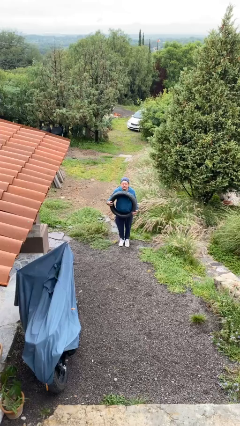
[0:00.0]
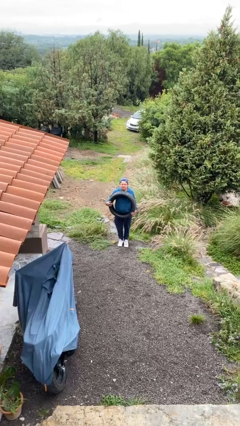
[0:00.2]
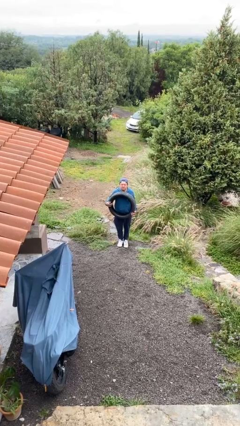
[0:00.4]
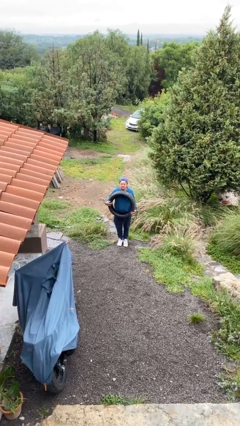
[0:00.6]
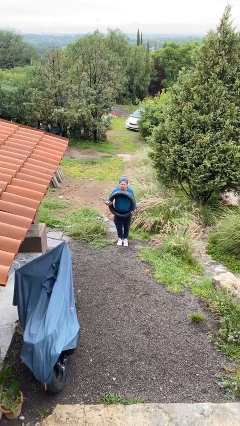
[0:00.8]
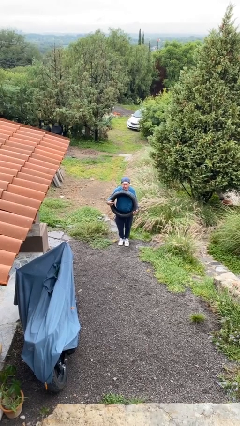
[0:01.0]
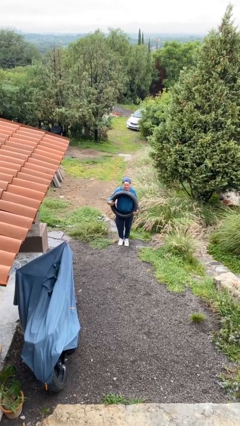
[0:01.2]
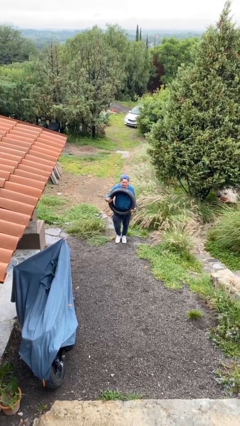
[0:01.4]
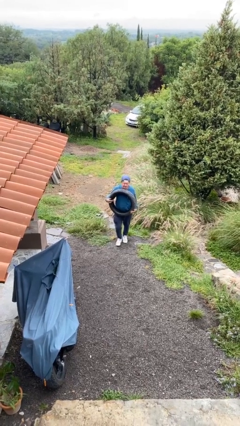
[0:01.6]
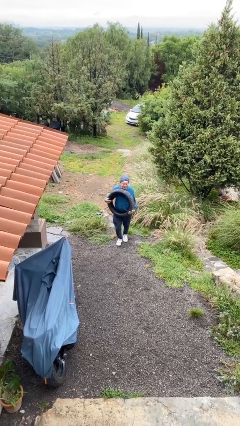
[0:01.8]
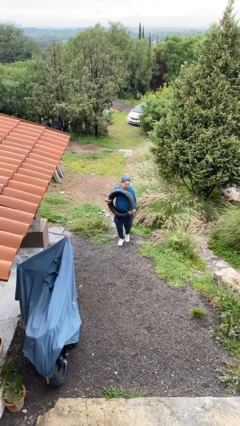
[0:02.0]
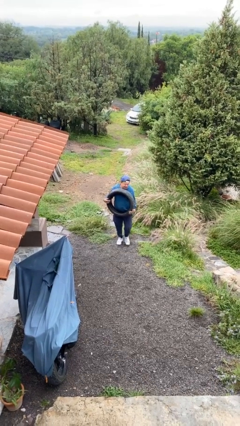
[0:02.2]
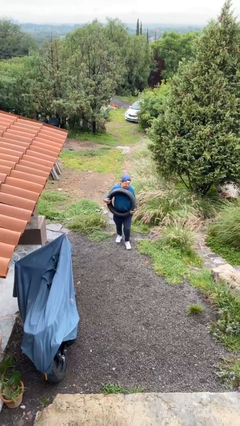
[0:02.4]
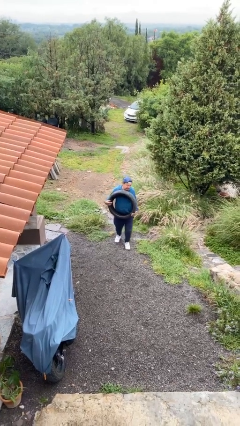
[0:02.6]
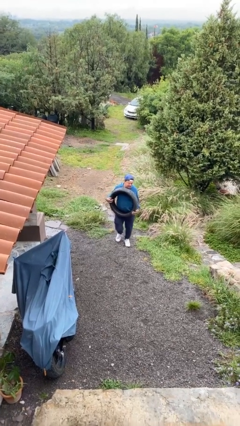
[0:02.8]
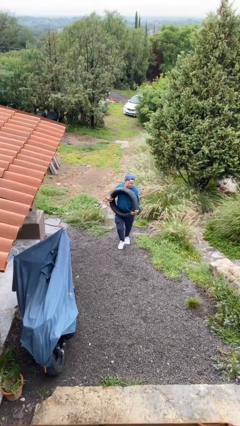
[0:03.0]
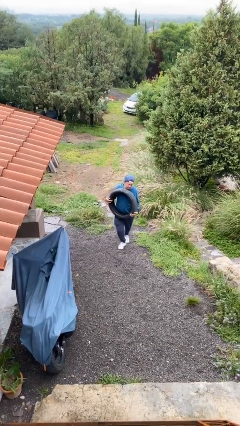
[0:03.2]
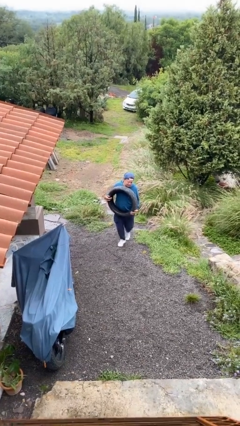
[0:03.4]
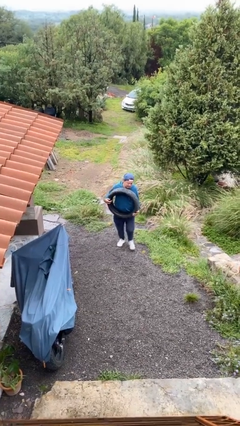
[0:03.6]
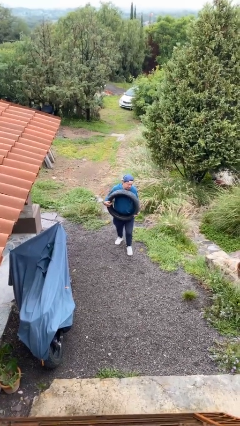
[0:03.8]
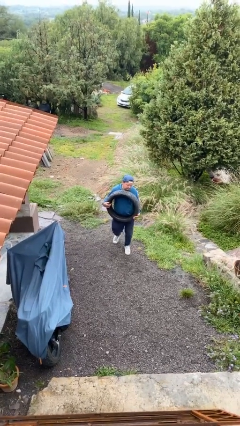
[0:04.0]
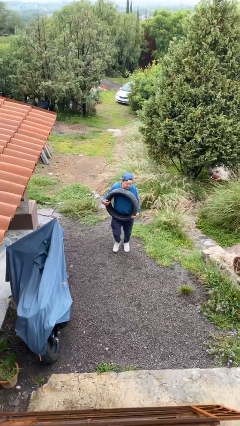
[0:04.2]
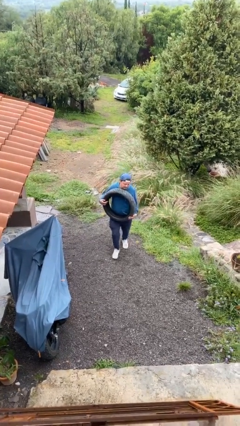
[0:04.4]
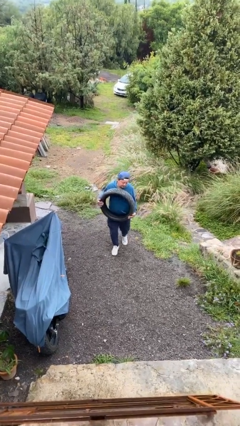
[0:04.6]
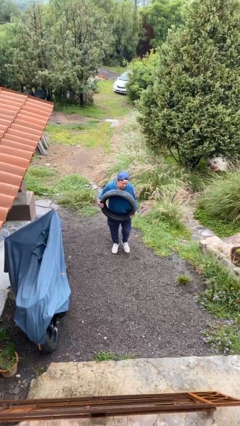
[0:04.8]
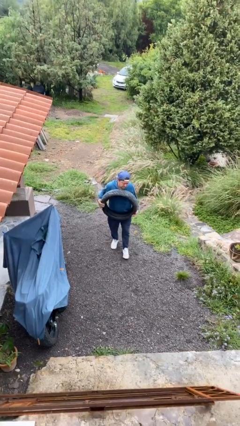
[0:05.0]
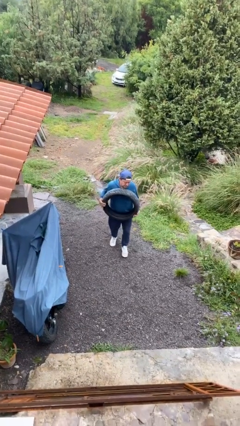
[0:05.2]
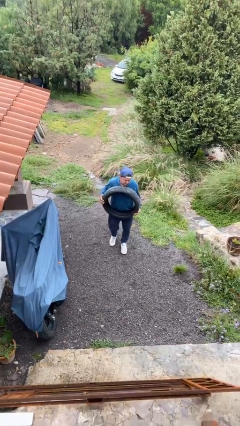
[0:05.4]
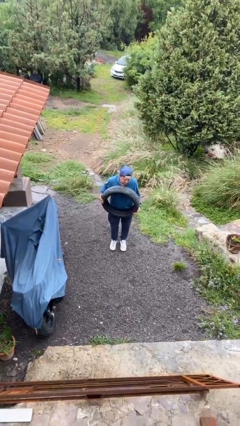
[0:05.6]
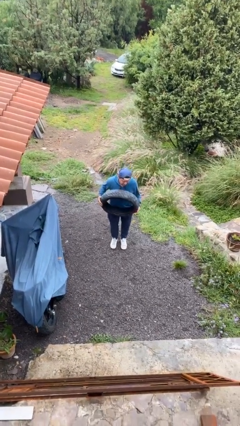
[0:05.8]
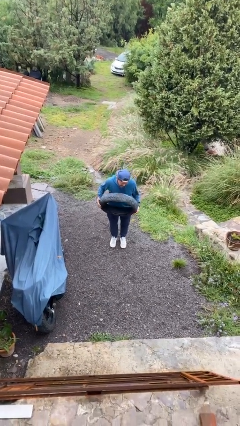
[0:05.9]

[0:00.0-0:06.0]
person carries heavy object

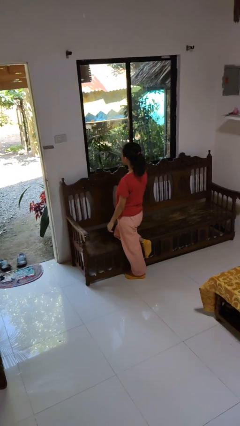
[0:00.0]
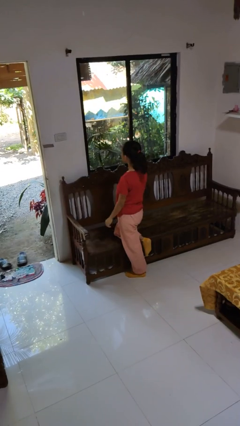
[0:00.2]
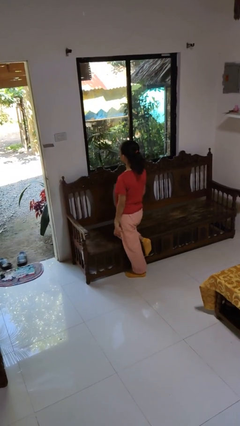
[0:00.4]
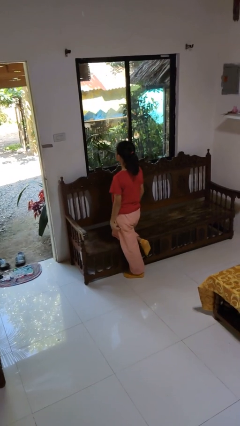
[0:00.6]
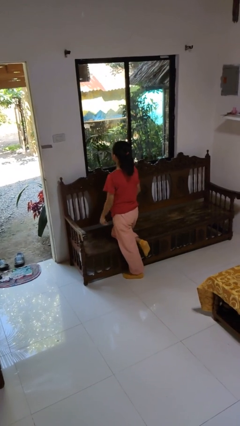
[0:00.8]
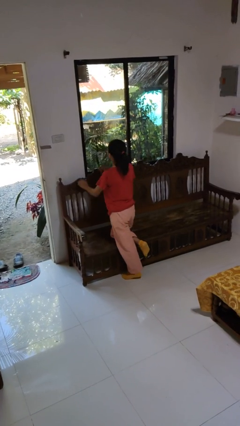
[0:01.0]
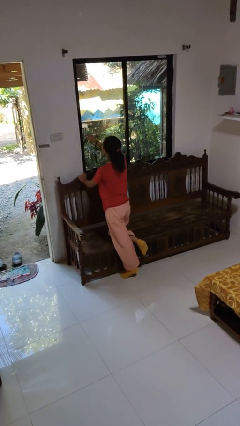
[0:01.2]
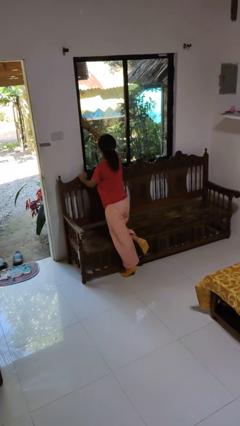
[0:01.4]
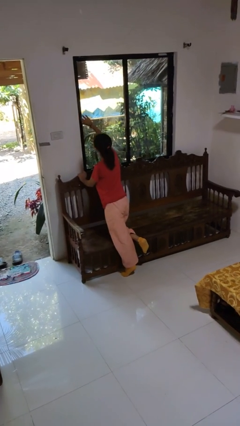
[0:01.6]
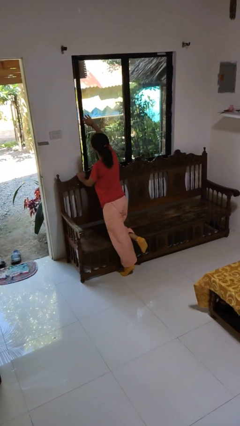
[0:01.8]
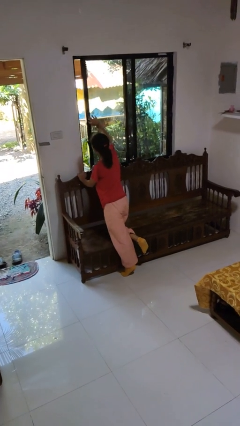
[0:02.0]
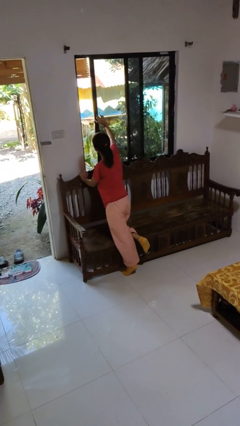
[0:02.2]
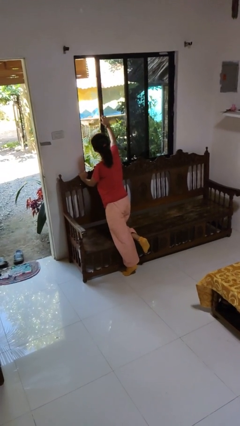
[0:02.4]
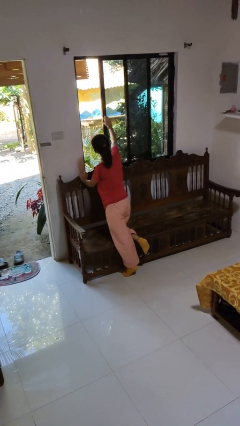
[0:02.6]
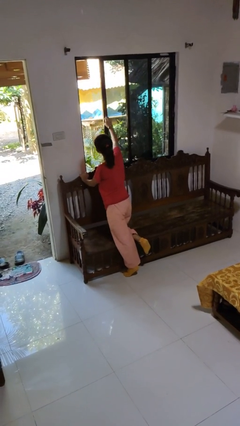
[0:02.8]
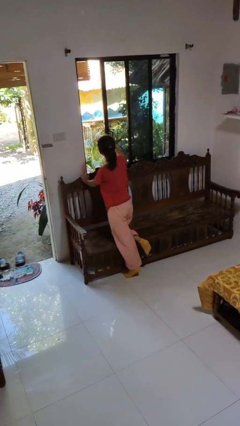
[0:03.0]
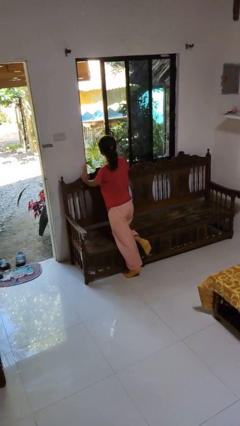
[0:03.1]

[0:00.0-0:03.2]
person opens home window

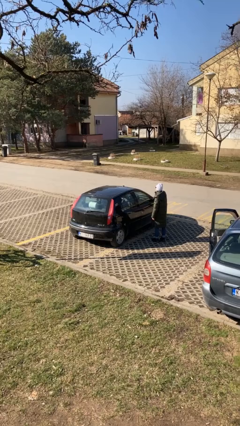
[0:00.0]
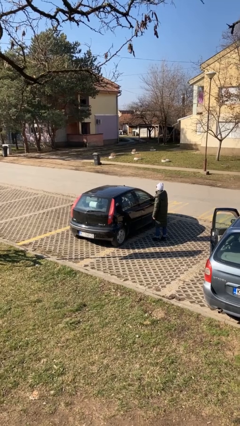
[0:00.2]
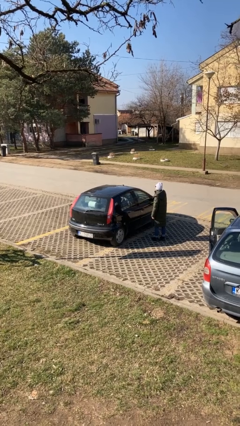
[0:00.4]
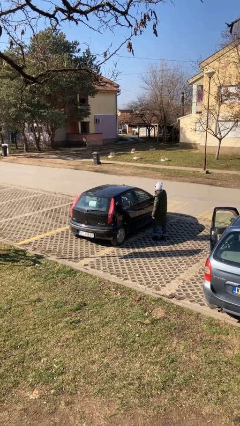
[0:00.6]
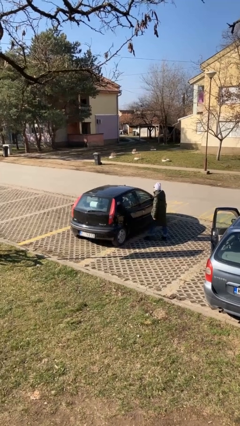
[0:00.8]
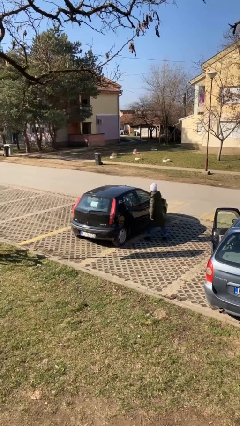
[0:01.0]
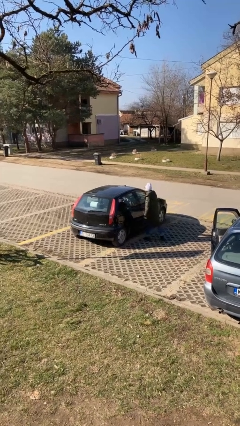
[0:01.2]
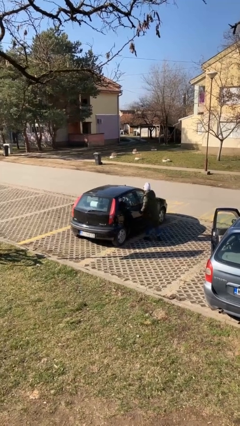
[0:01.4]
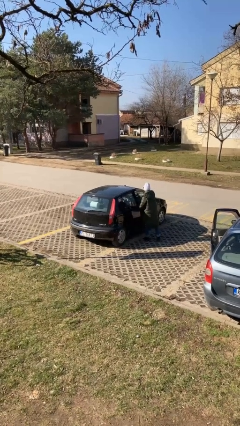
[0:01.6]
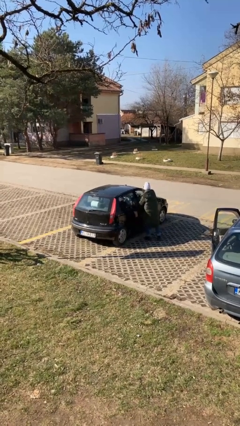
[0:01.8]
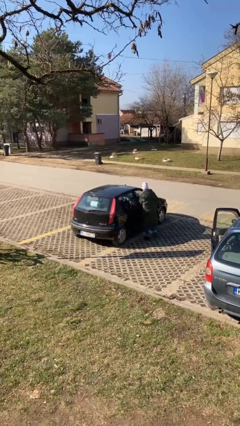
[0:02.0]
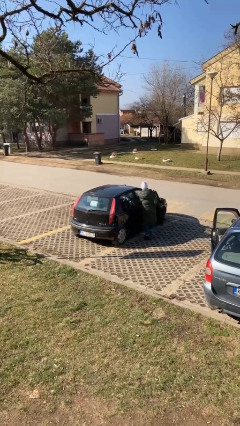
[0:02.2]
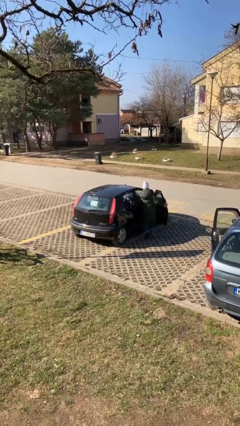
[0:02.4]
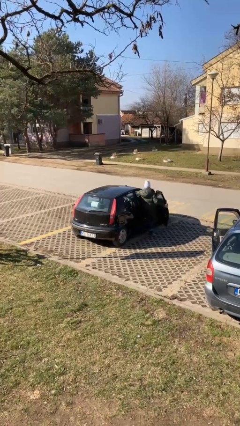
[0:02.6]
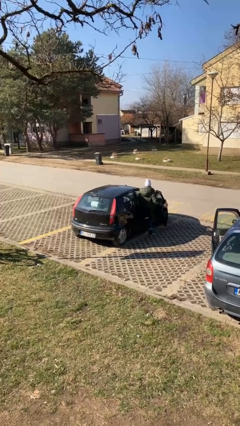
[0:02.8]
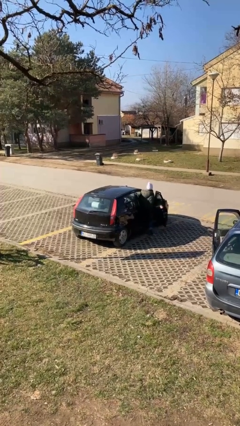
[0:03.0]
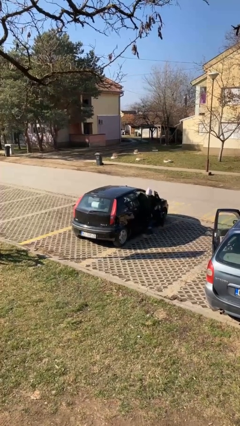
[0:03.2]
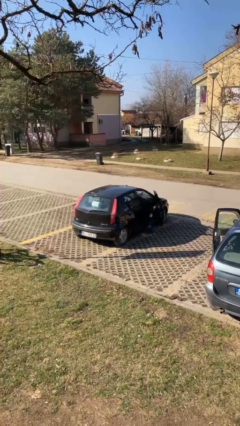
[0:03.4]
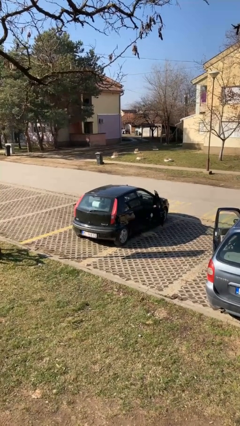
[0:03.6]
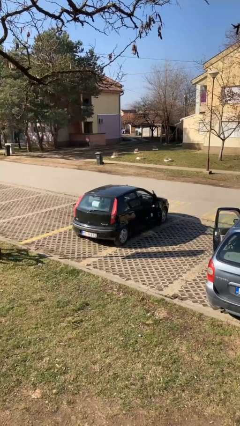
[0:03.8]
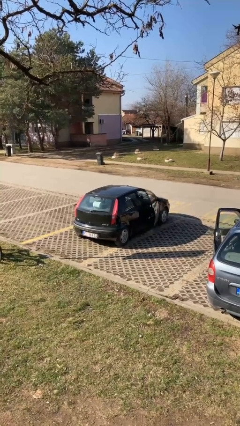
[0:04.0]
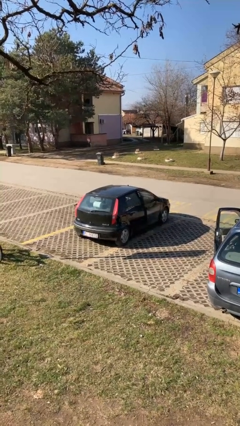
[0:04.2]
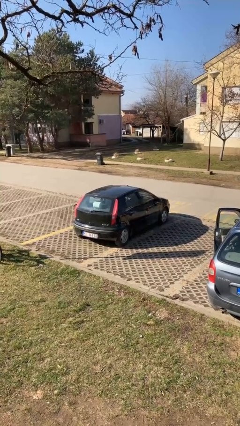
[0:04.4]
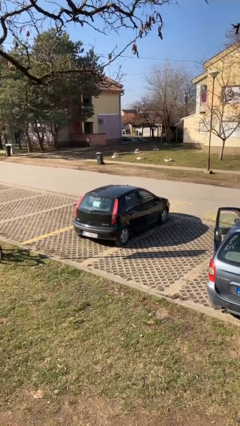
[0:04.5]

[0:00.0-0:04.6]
car picks up person

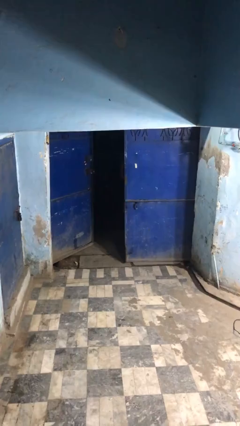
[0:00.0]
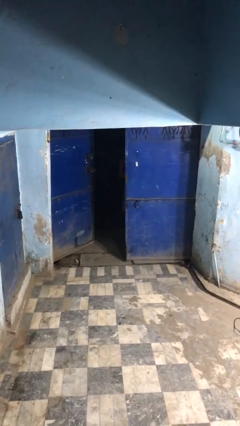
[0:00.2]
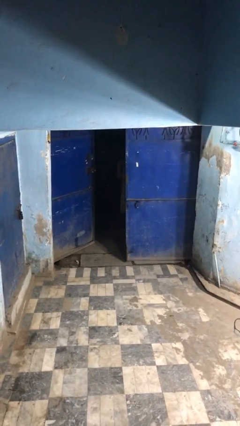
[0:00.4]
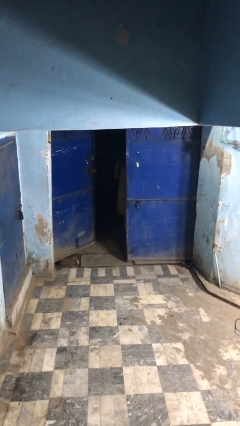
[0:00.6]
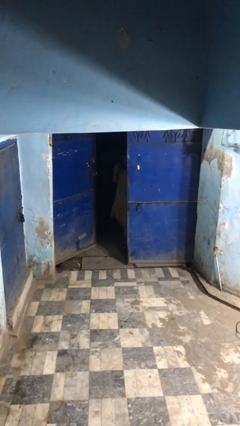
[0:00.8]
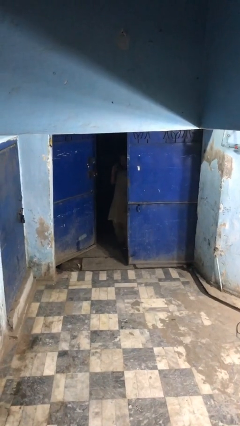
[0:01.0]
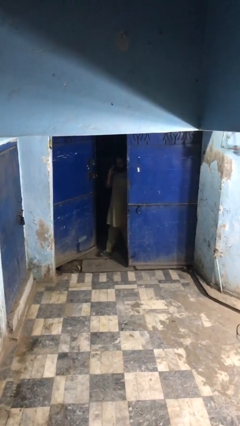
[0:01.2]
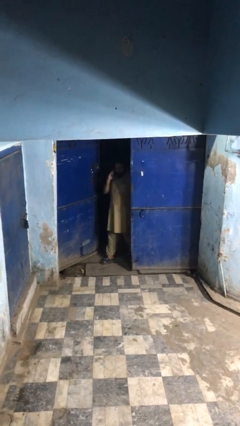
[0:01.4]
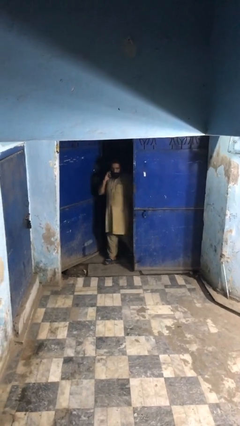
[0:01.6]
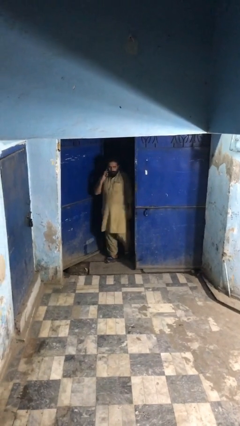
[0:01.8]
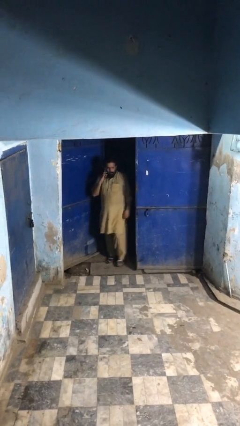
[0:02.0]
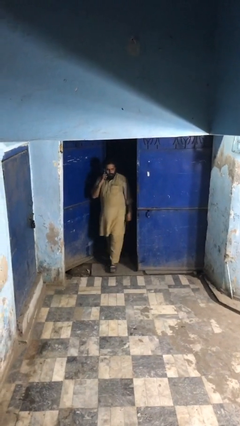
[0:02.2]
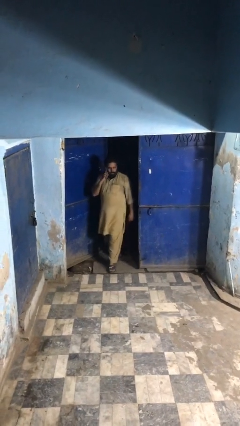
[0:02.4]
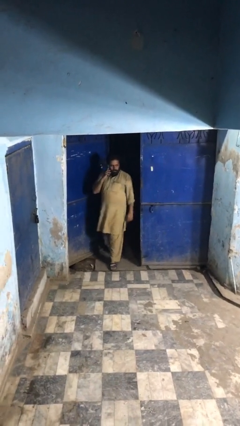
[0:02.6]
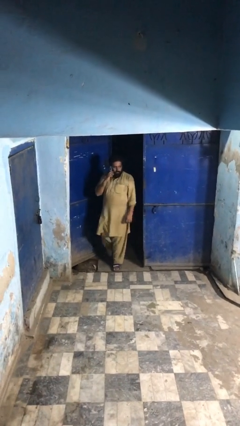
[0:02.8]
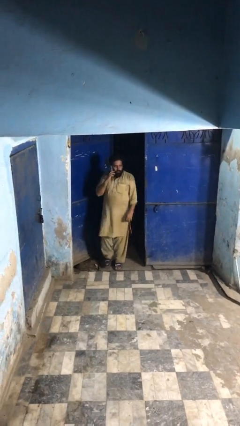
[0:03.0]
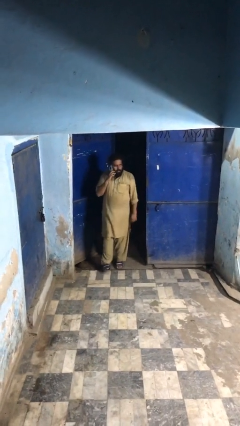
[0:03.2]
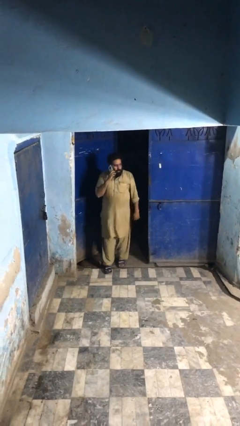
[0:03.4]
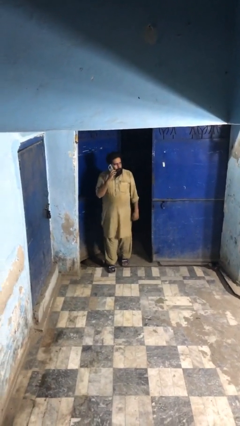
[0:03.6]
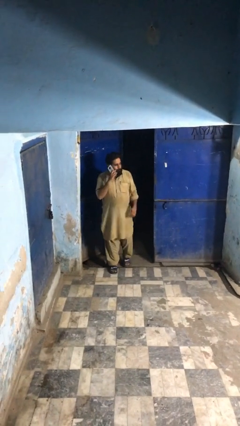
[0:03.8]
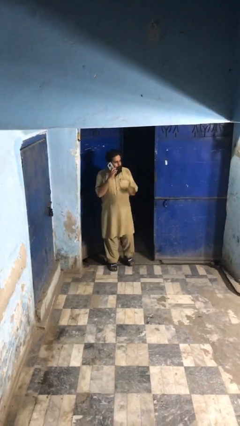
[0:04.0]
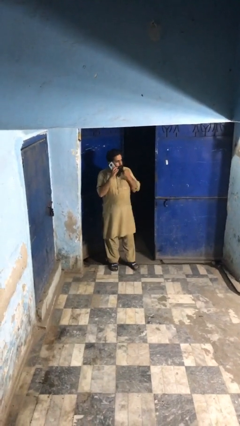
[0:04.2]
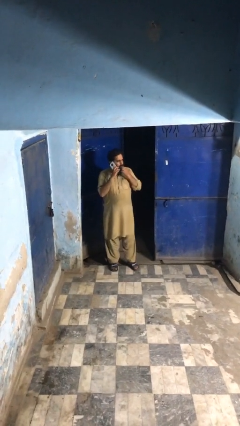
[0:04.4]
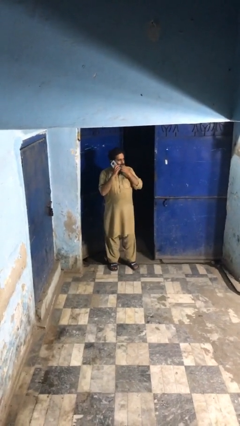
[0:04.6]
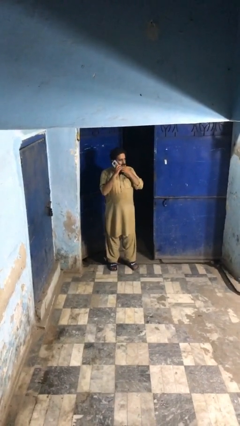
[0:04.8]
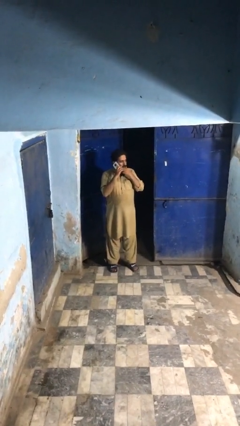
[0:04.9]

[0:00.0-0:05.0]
person enters scene through structure
